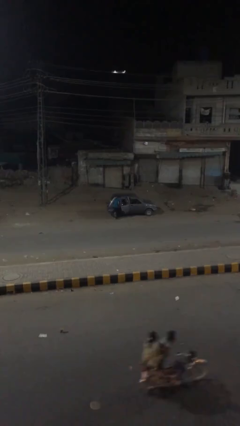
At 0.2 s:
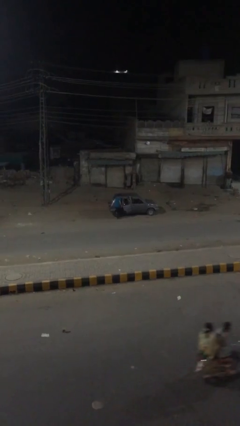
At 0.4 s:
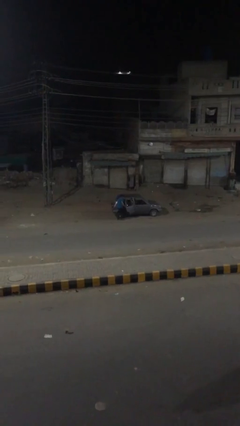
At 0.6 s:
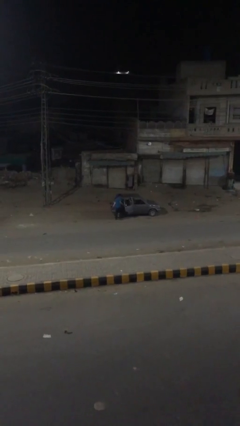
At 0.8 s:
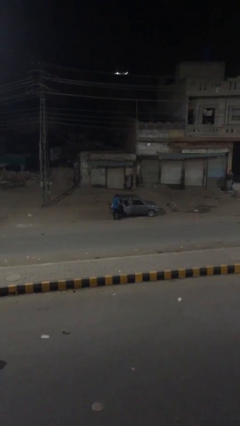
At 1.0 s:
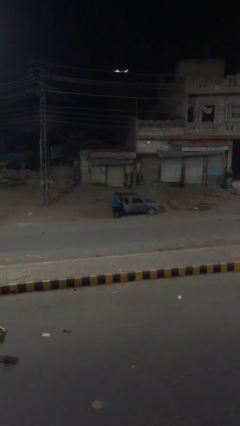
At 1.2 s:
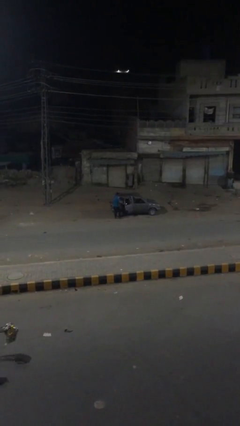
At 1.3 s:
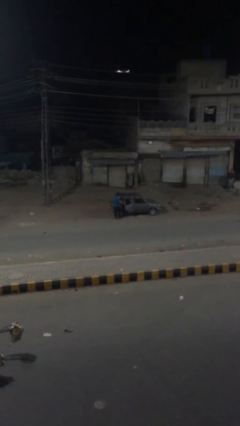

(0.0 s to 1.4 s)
person unloads car

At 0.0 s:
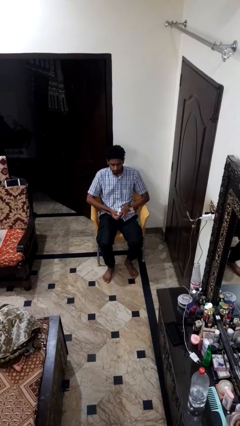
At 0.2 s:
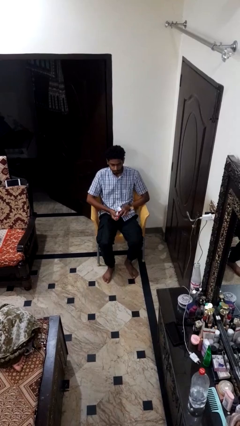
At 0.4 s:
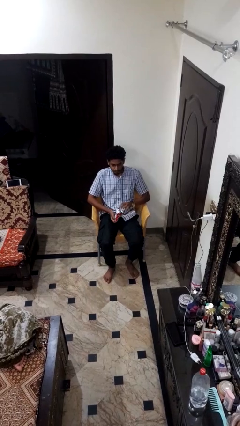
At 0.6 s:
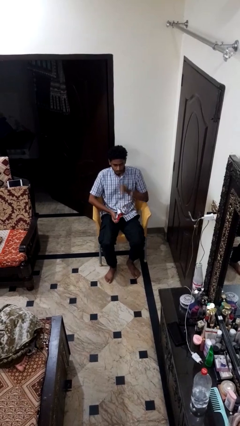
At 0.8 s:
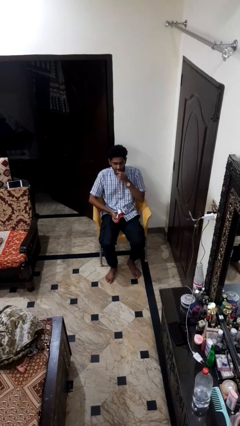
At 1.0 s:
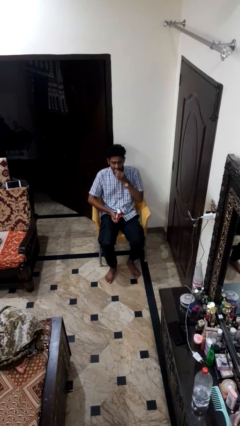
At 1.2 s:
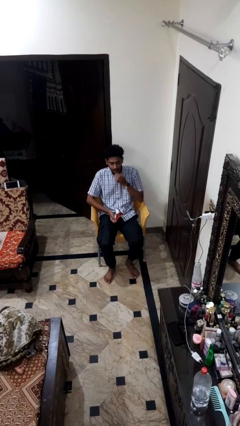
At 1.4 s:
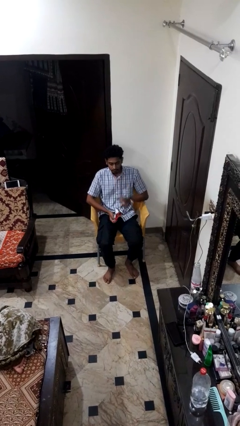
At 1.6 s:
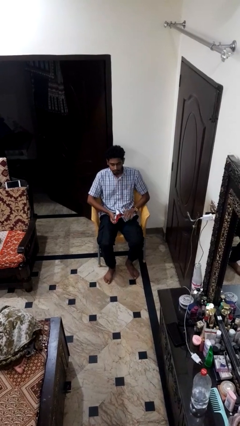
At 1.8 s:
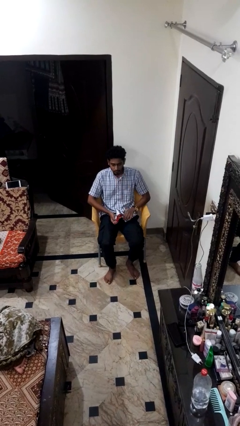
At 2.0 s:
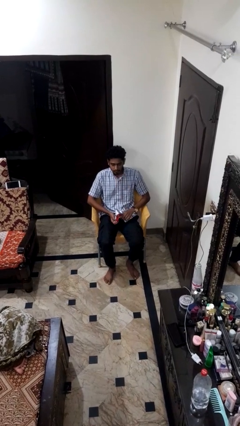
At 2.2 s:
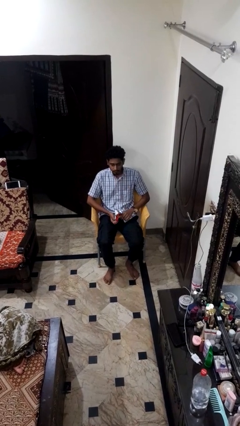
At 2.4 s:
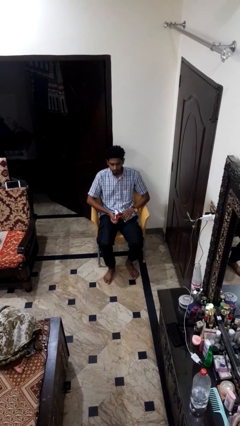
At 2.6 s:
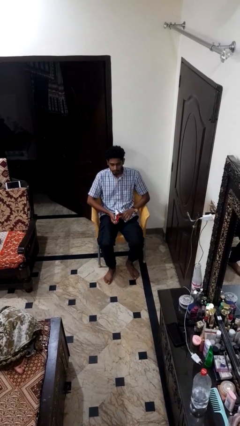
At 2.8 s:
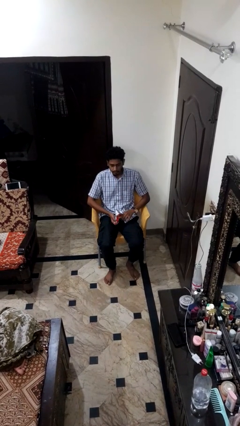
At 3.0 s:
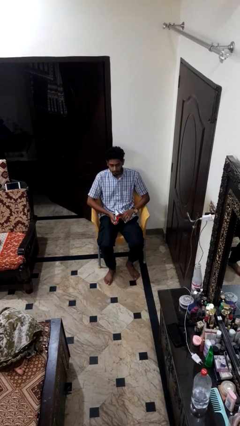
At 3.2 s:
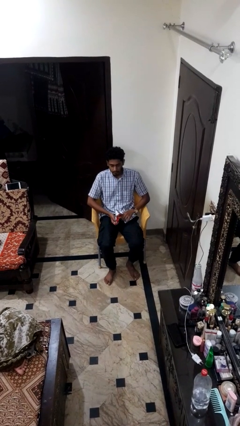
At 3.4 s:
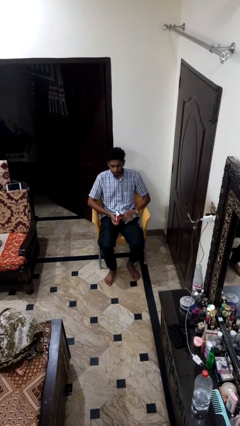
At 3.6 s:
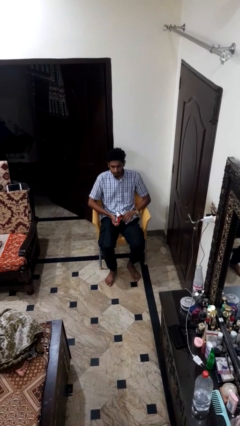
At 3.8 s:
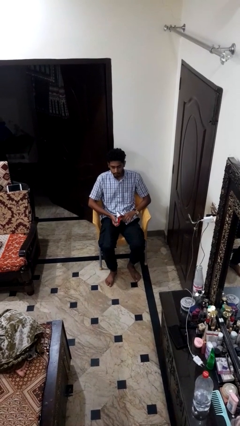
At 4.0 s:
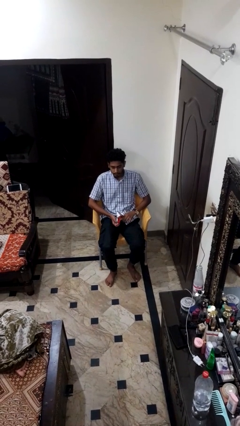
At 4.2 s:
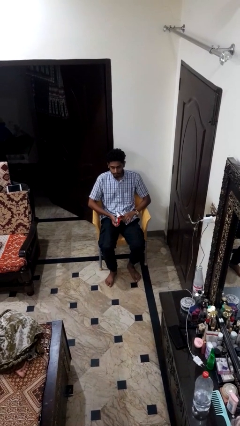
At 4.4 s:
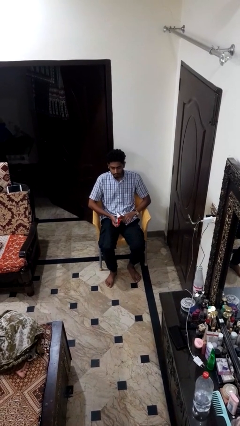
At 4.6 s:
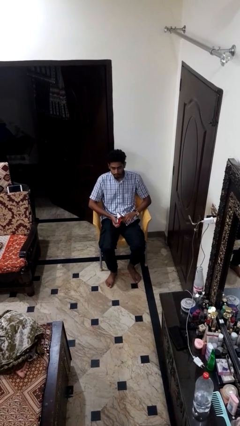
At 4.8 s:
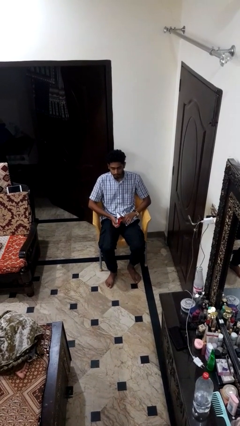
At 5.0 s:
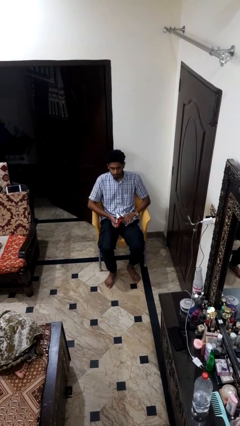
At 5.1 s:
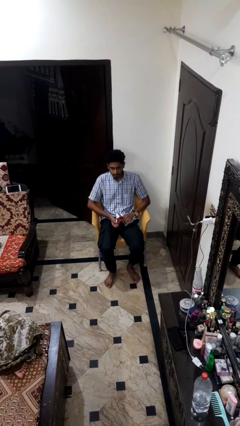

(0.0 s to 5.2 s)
person eats snack from bag

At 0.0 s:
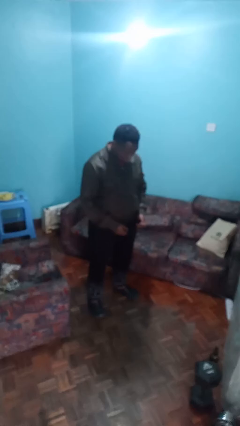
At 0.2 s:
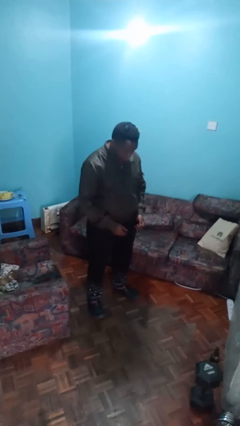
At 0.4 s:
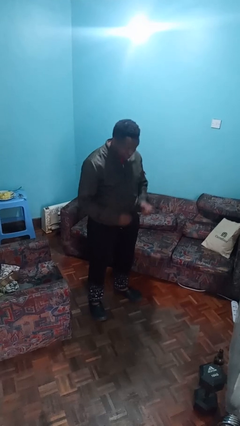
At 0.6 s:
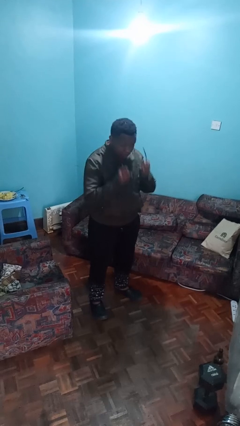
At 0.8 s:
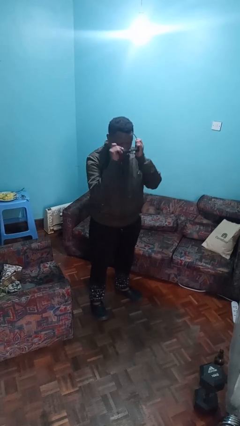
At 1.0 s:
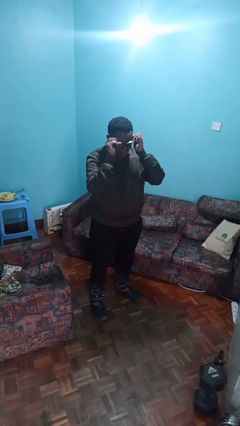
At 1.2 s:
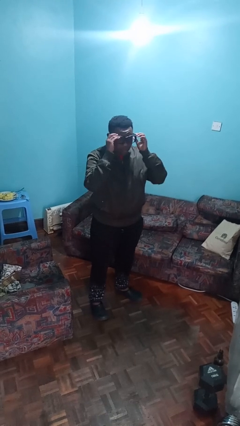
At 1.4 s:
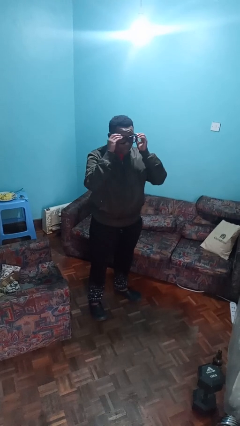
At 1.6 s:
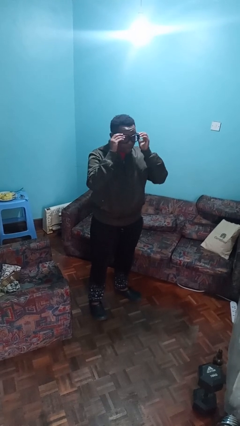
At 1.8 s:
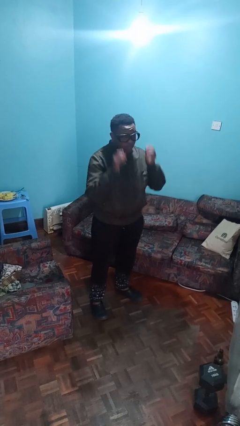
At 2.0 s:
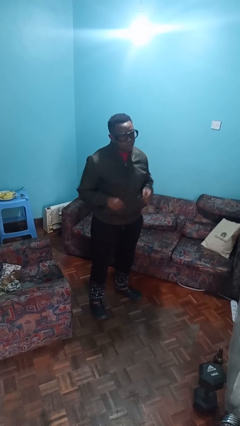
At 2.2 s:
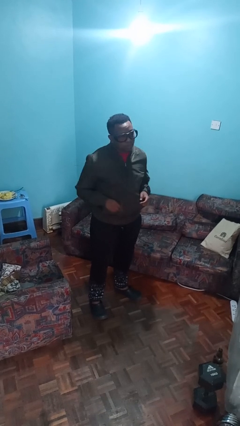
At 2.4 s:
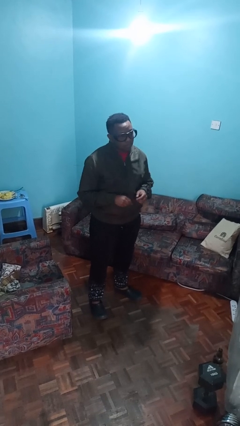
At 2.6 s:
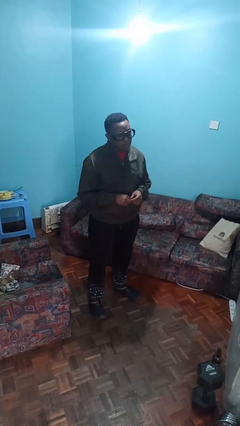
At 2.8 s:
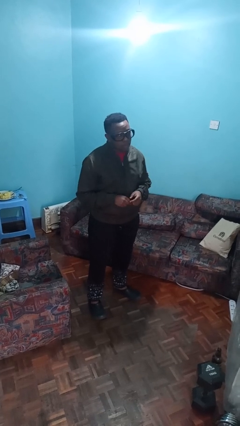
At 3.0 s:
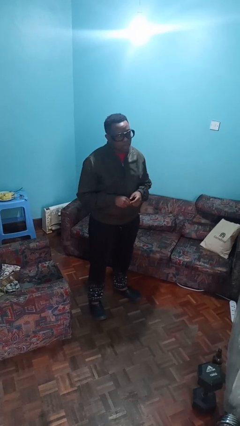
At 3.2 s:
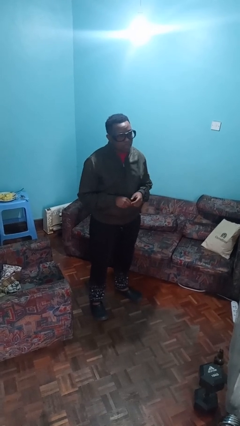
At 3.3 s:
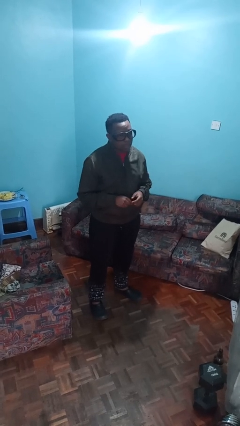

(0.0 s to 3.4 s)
person puts on glasses

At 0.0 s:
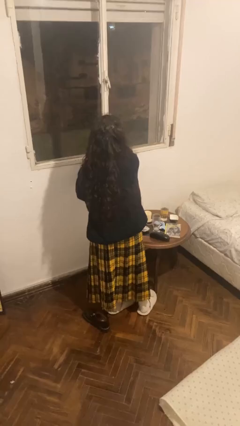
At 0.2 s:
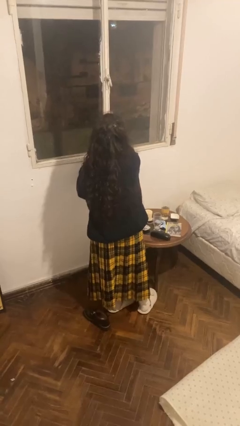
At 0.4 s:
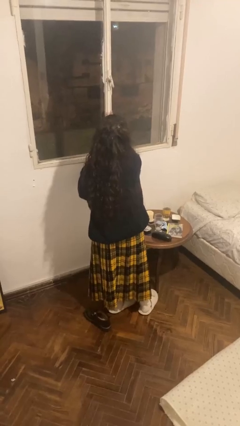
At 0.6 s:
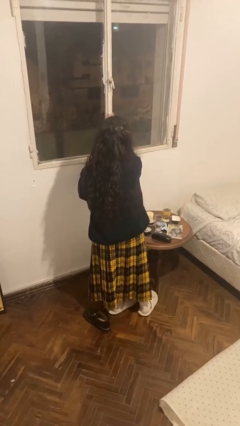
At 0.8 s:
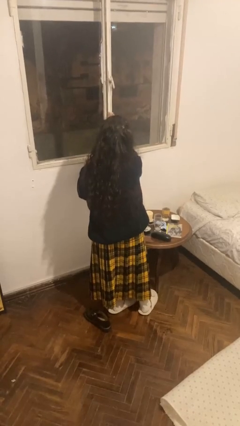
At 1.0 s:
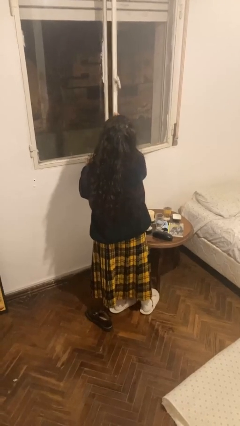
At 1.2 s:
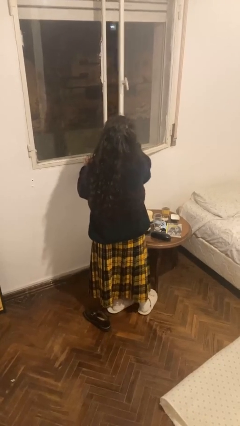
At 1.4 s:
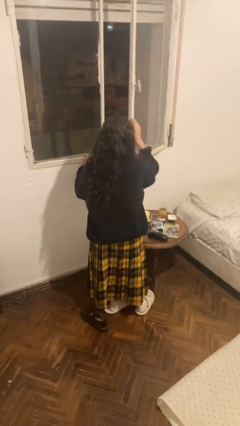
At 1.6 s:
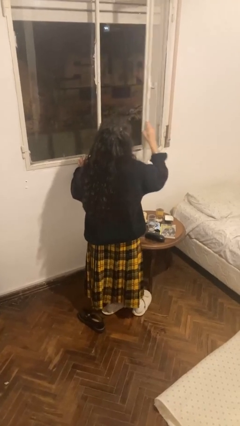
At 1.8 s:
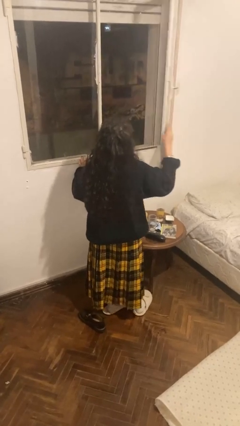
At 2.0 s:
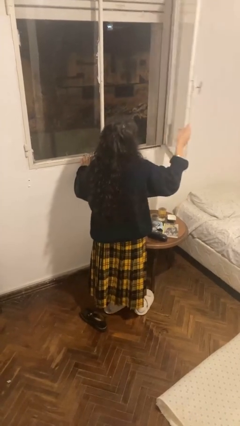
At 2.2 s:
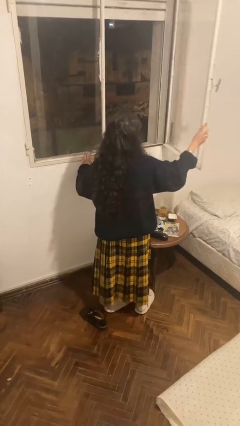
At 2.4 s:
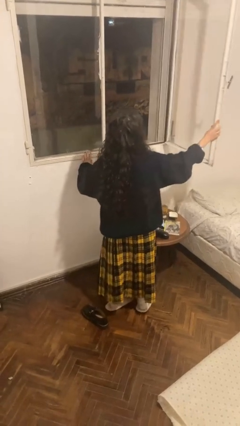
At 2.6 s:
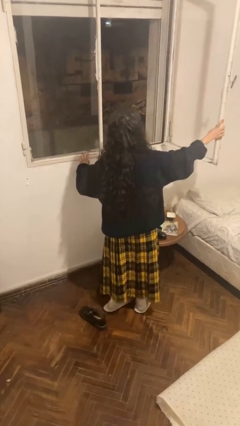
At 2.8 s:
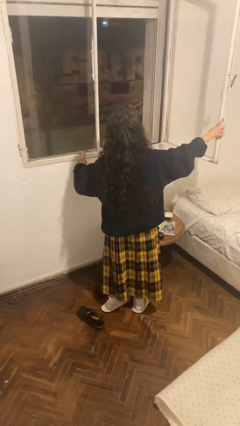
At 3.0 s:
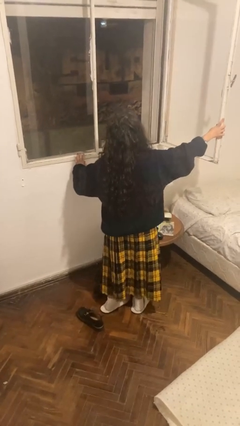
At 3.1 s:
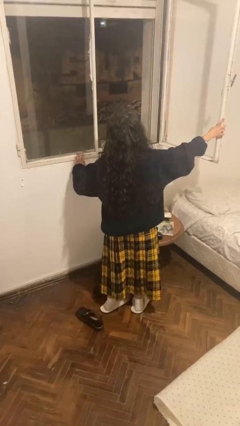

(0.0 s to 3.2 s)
person opens home window

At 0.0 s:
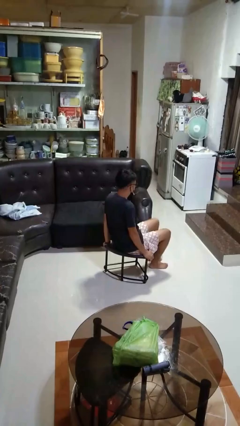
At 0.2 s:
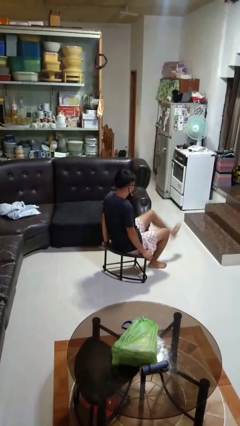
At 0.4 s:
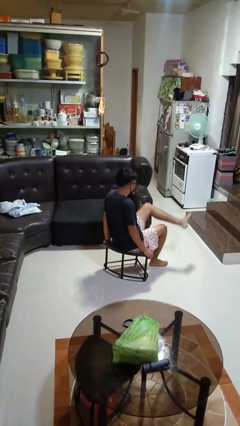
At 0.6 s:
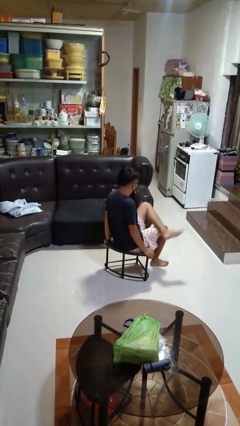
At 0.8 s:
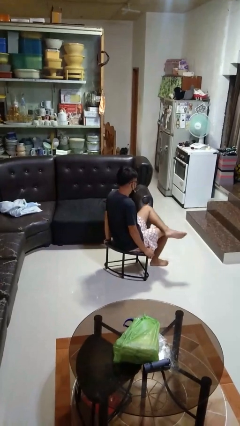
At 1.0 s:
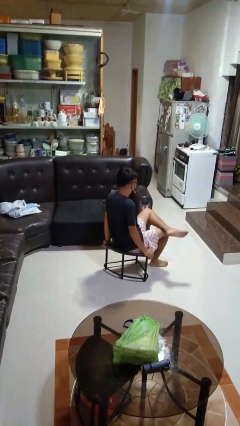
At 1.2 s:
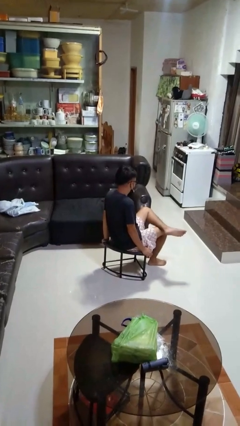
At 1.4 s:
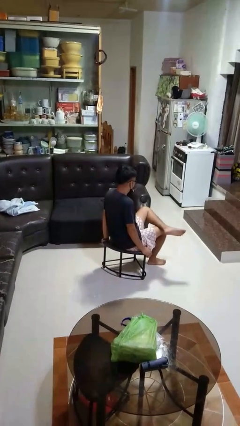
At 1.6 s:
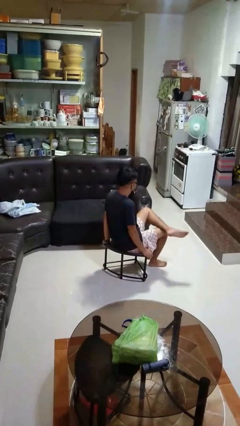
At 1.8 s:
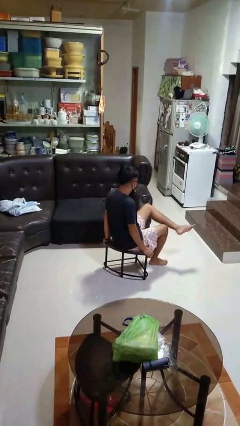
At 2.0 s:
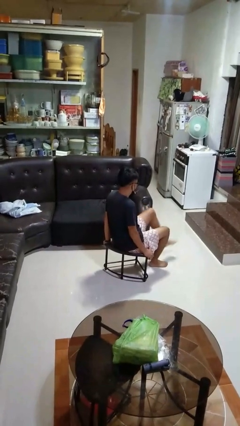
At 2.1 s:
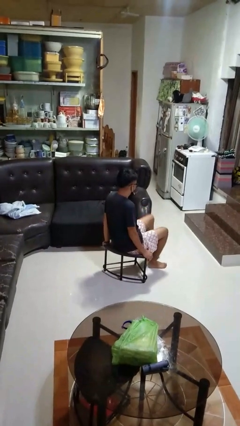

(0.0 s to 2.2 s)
person crosses legs

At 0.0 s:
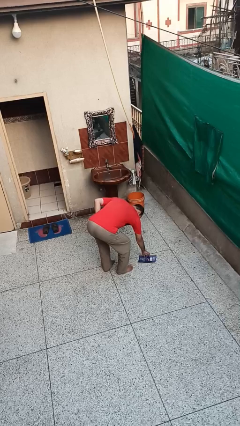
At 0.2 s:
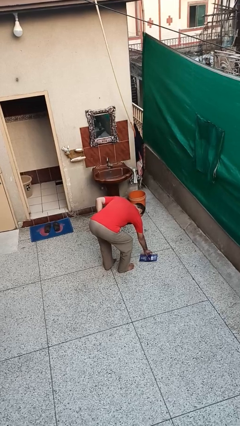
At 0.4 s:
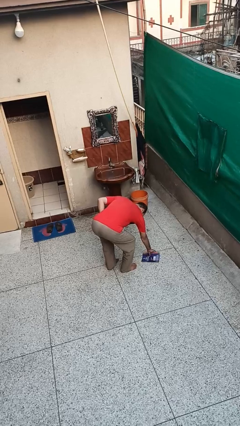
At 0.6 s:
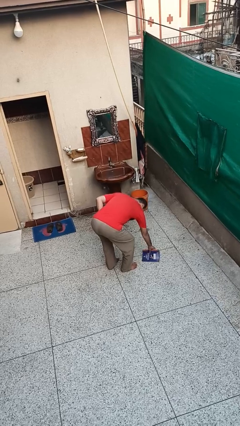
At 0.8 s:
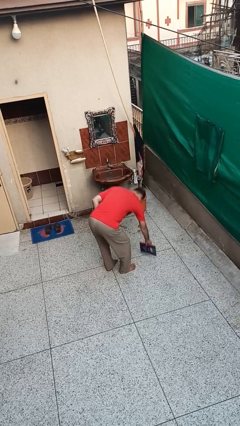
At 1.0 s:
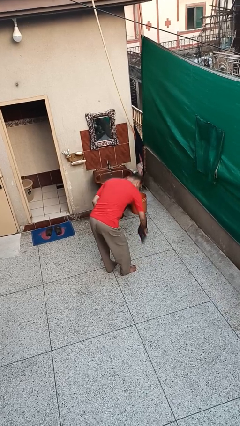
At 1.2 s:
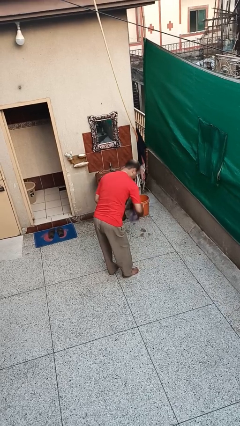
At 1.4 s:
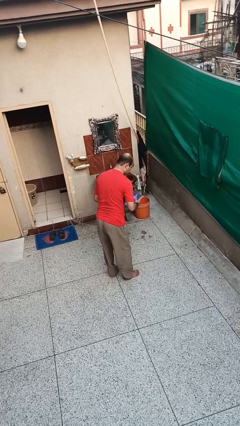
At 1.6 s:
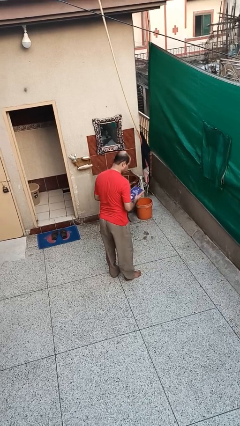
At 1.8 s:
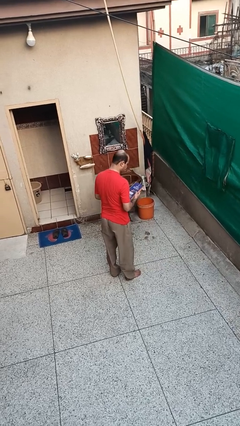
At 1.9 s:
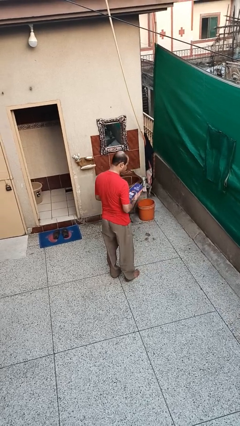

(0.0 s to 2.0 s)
person picks up object from floor
